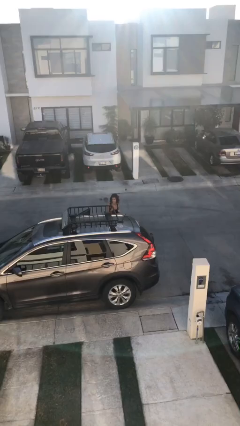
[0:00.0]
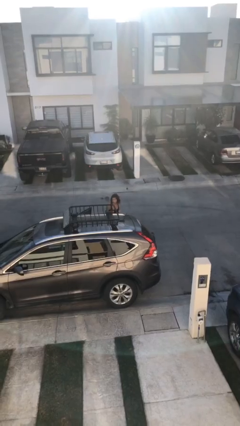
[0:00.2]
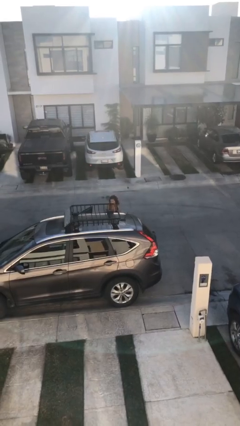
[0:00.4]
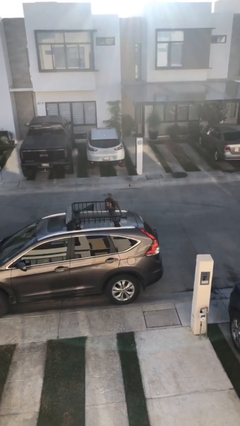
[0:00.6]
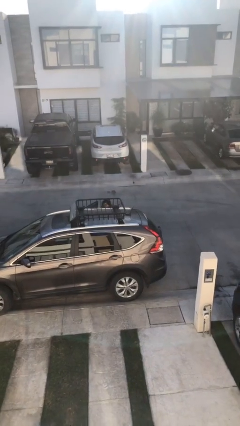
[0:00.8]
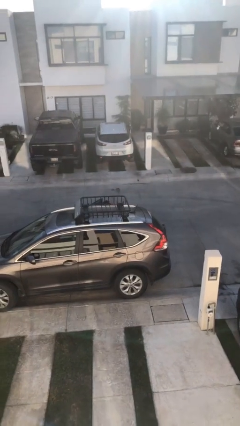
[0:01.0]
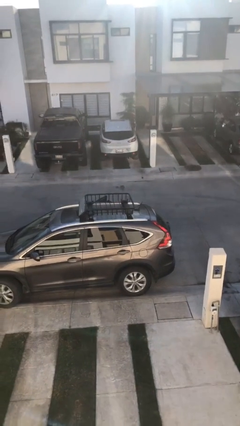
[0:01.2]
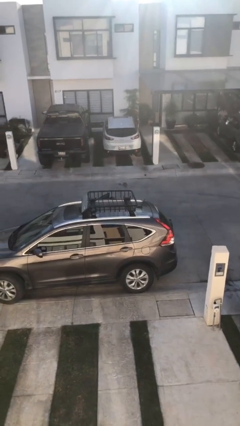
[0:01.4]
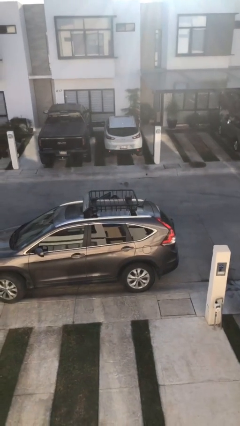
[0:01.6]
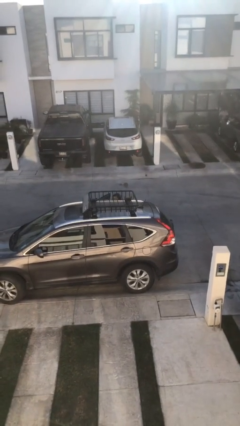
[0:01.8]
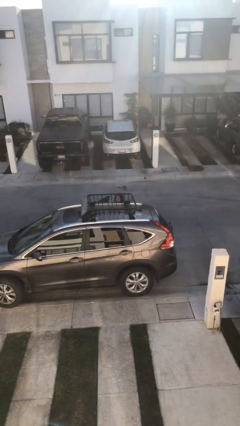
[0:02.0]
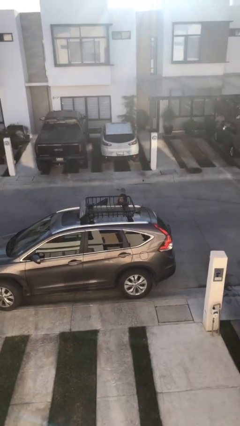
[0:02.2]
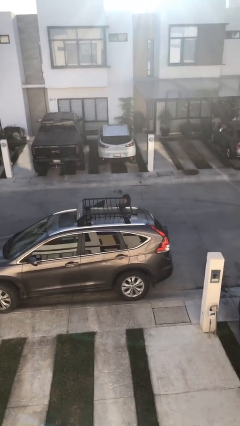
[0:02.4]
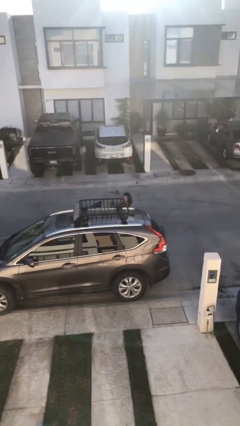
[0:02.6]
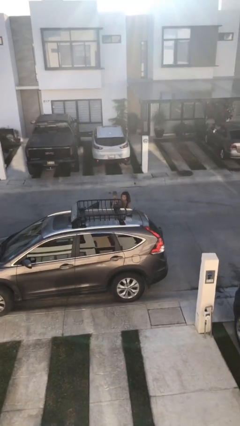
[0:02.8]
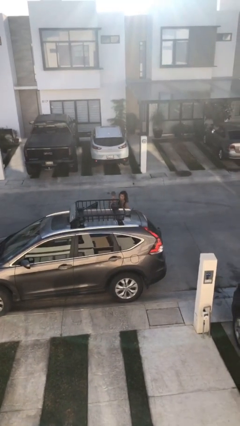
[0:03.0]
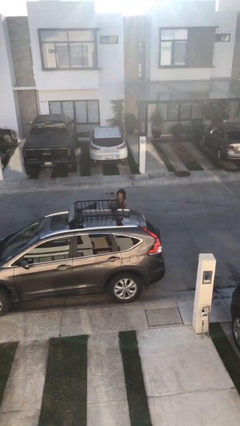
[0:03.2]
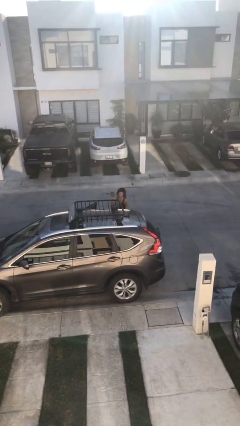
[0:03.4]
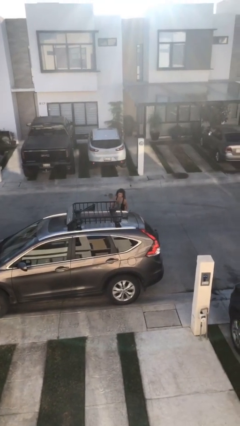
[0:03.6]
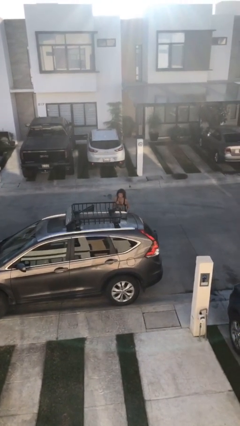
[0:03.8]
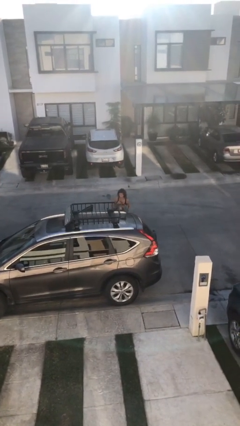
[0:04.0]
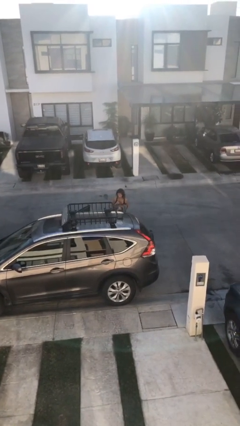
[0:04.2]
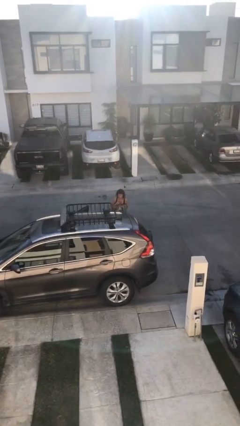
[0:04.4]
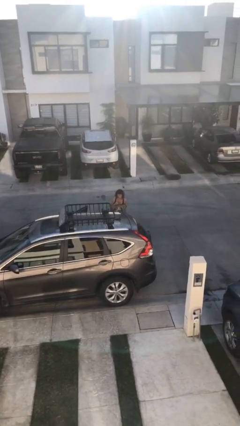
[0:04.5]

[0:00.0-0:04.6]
person unloads car

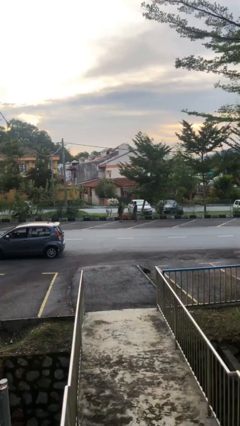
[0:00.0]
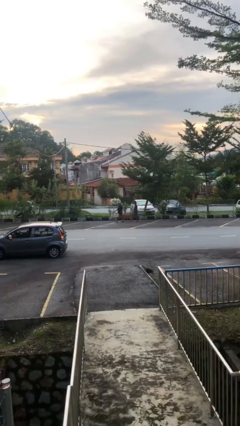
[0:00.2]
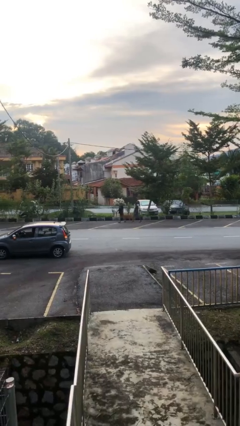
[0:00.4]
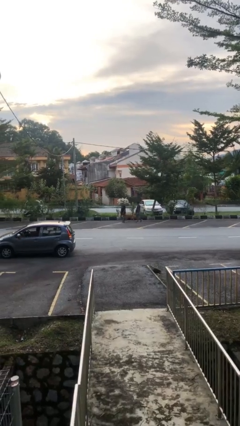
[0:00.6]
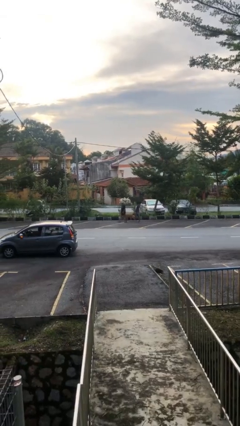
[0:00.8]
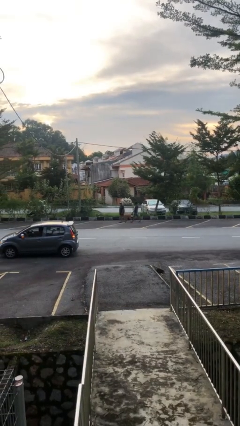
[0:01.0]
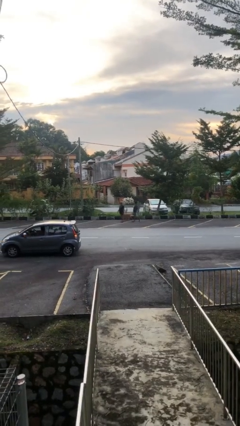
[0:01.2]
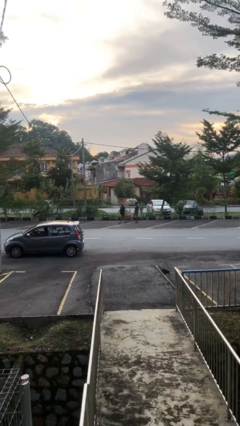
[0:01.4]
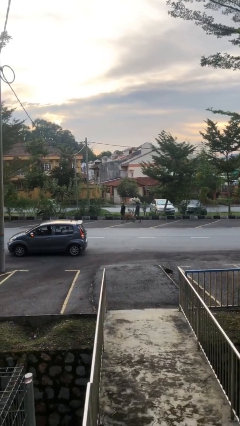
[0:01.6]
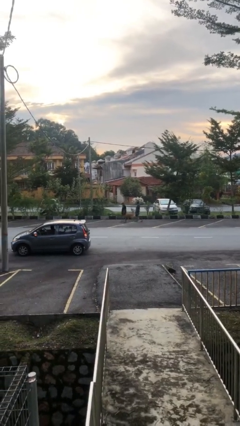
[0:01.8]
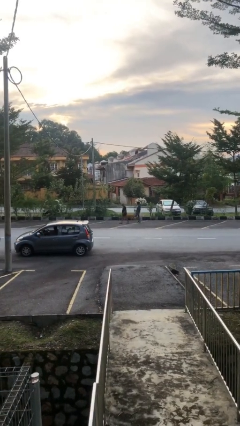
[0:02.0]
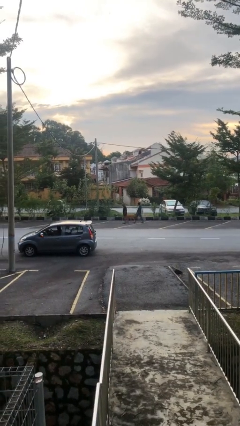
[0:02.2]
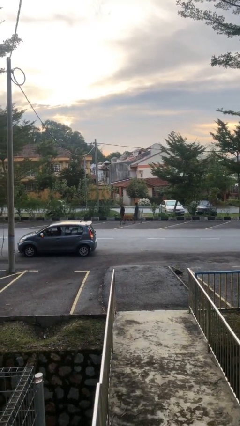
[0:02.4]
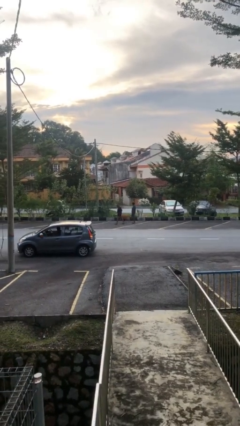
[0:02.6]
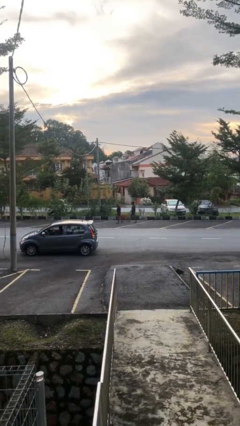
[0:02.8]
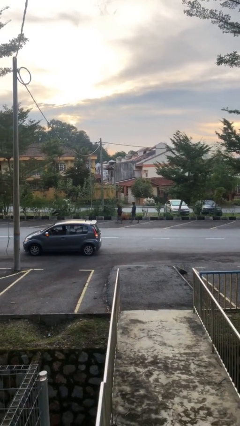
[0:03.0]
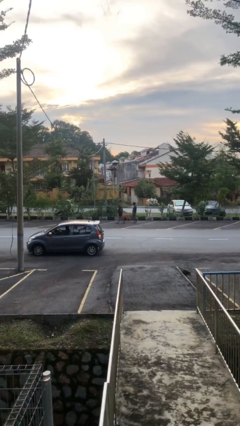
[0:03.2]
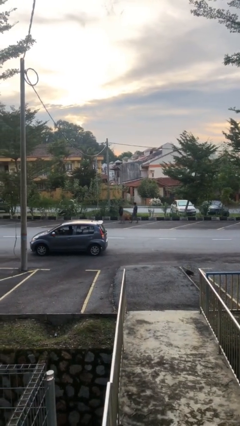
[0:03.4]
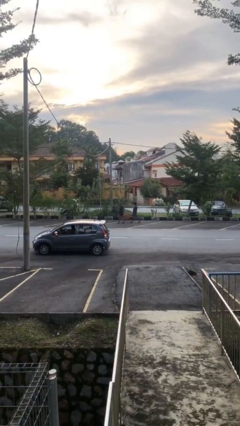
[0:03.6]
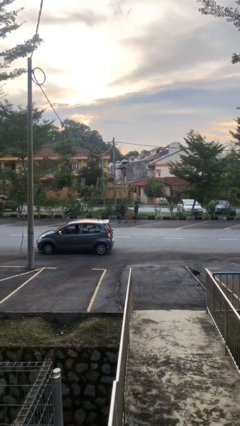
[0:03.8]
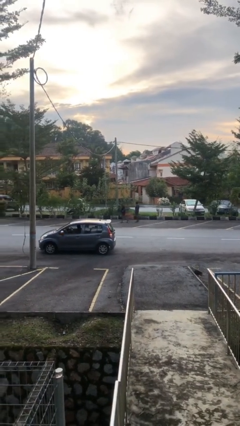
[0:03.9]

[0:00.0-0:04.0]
person talks to person

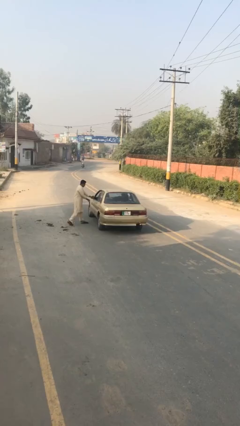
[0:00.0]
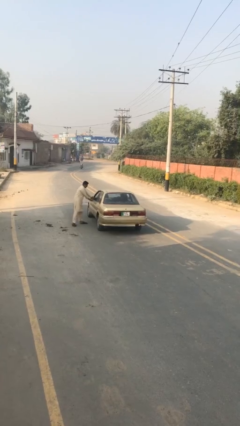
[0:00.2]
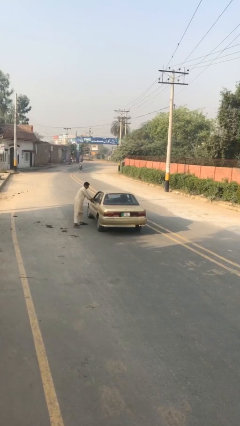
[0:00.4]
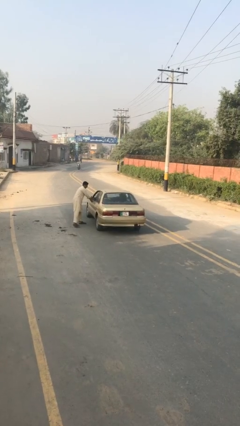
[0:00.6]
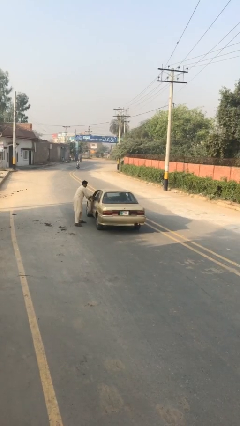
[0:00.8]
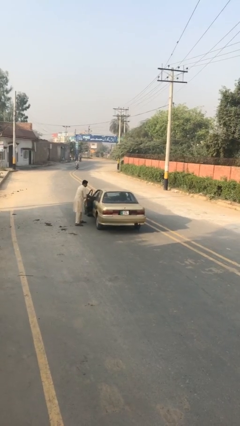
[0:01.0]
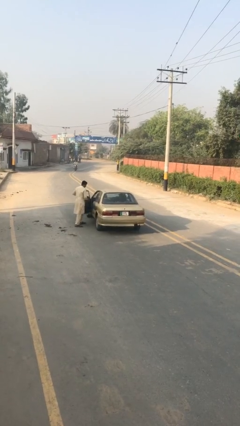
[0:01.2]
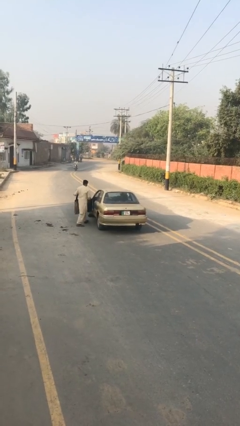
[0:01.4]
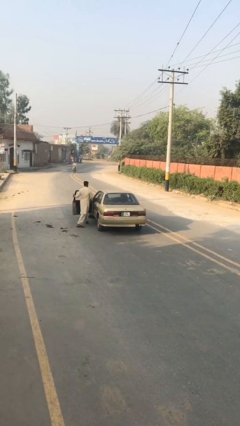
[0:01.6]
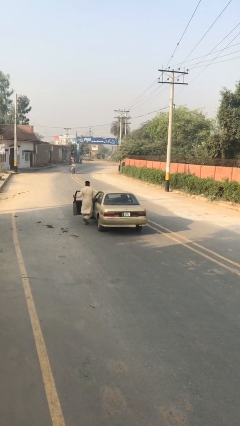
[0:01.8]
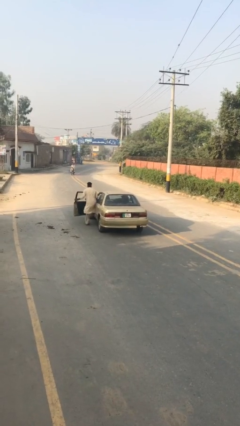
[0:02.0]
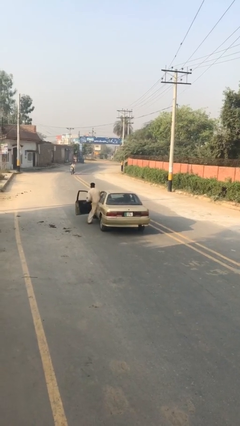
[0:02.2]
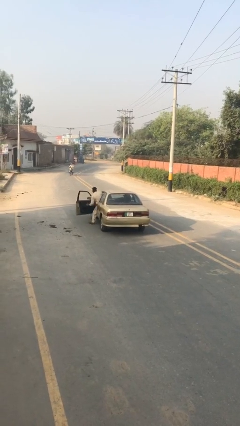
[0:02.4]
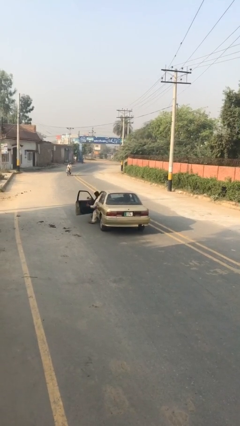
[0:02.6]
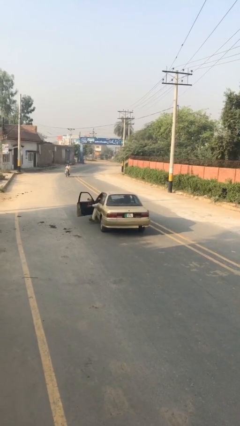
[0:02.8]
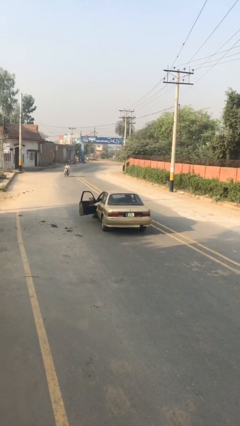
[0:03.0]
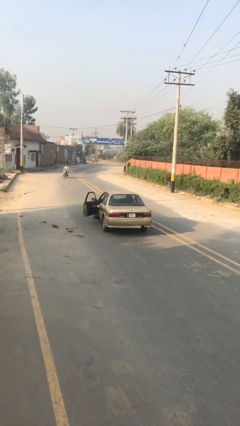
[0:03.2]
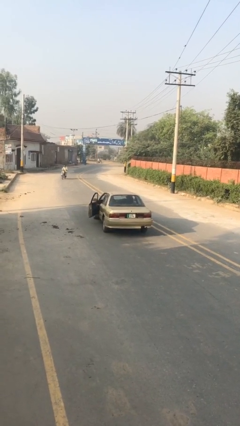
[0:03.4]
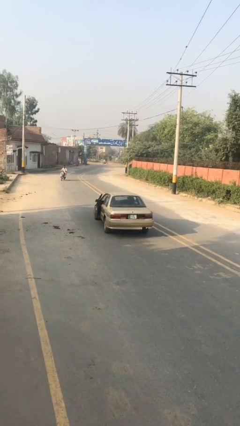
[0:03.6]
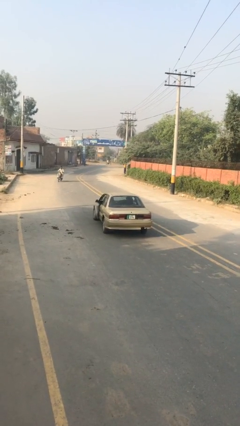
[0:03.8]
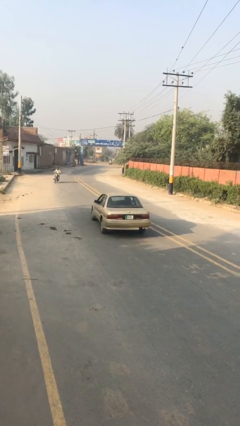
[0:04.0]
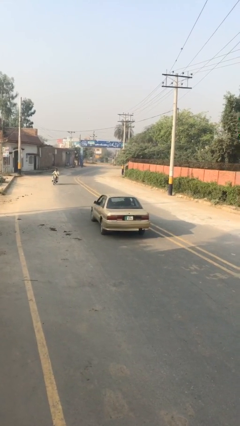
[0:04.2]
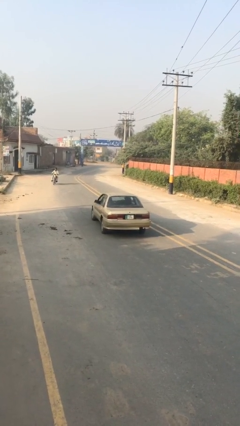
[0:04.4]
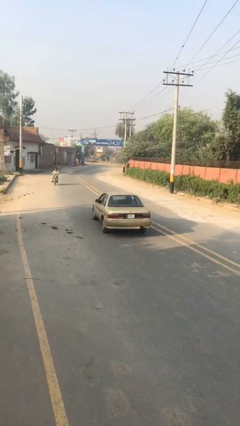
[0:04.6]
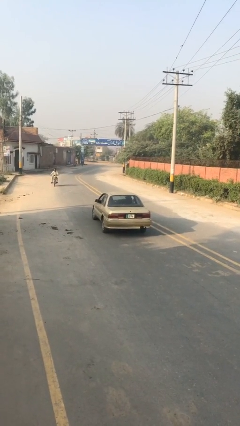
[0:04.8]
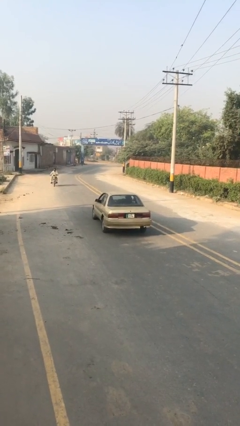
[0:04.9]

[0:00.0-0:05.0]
car picks up person

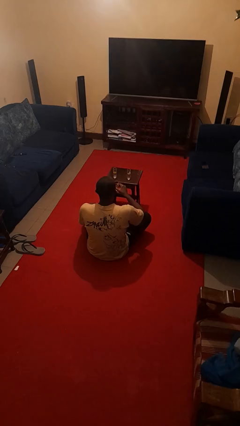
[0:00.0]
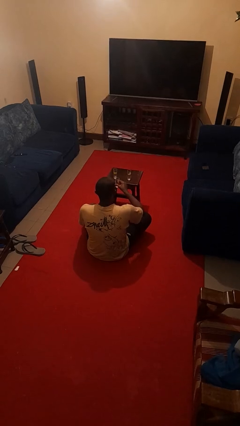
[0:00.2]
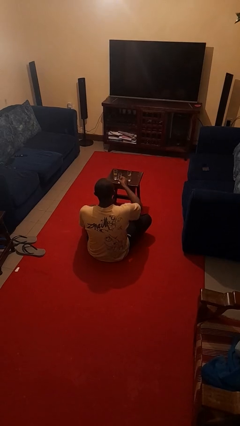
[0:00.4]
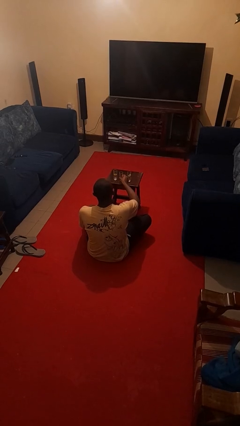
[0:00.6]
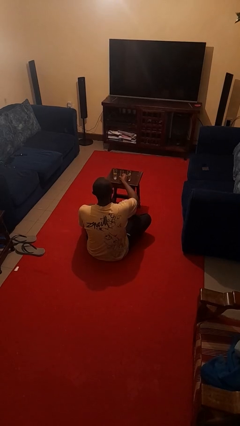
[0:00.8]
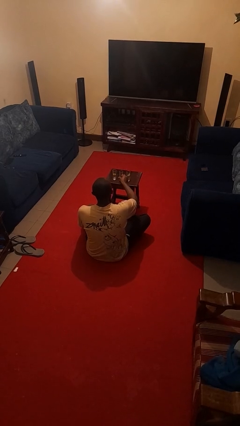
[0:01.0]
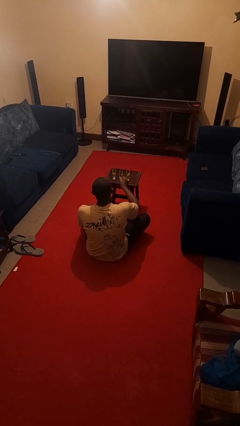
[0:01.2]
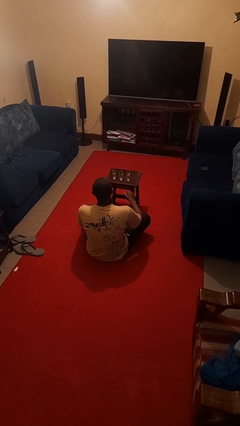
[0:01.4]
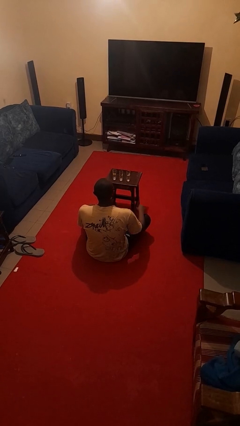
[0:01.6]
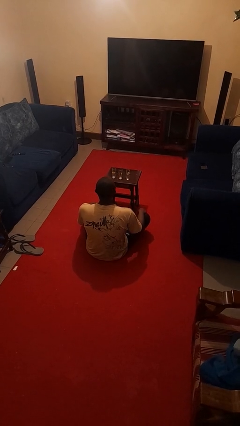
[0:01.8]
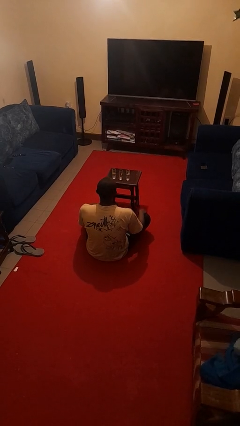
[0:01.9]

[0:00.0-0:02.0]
person puts down object on table

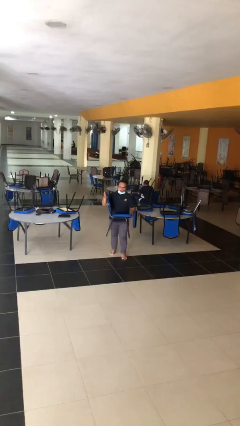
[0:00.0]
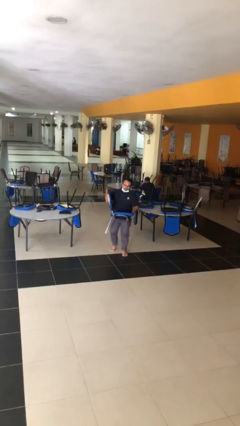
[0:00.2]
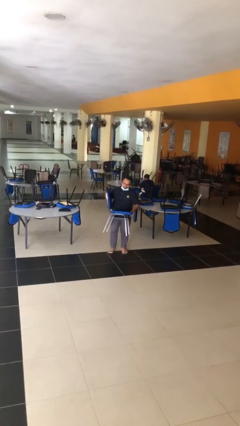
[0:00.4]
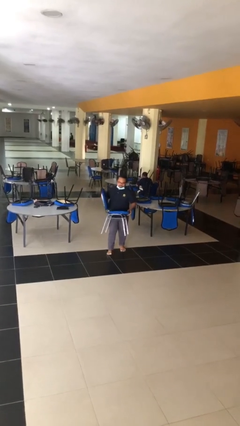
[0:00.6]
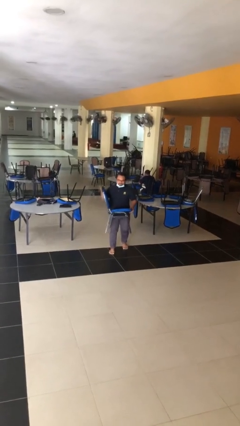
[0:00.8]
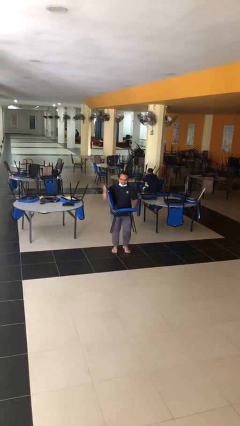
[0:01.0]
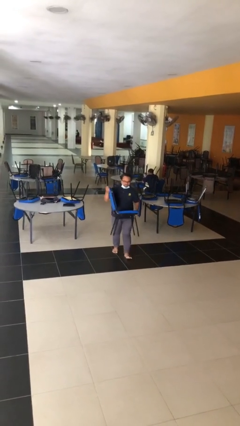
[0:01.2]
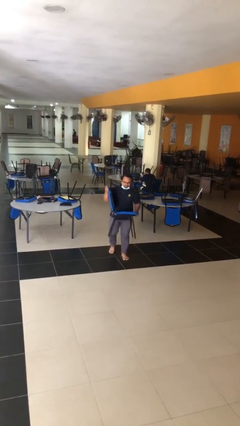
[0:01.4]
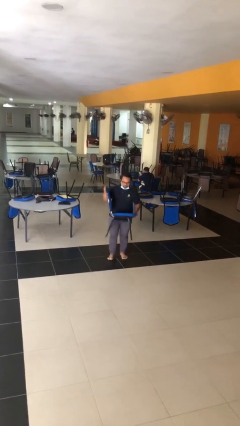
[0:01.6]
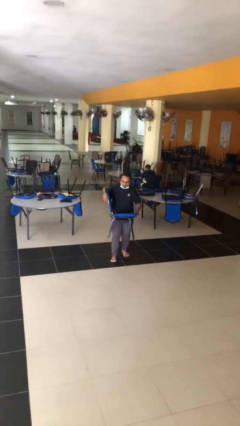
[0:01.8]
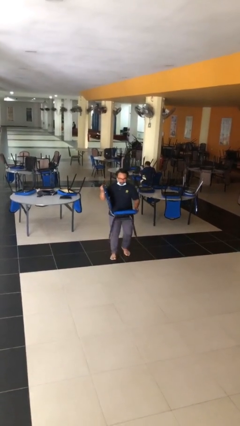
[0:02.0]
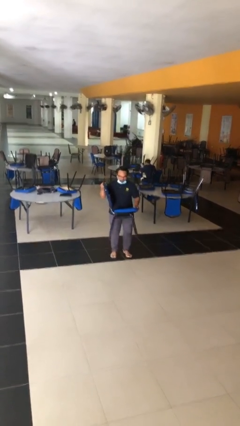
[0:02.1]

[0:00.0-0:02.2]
person carries heavy object
